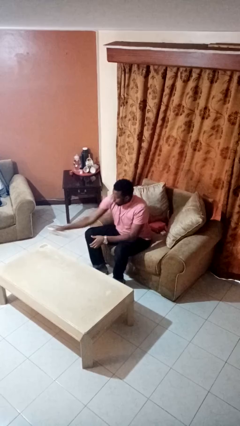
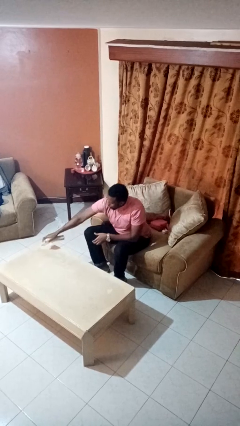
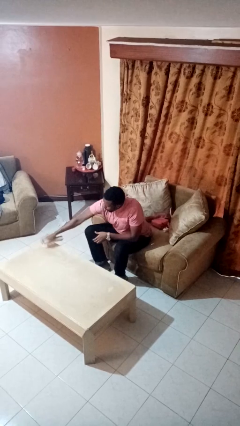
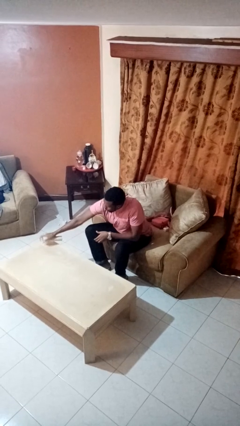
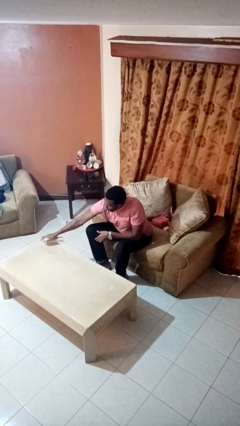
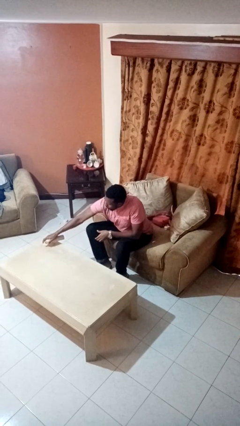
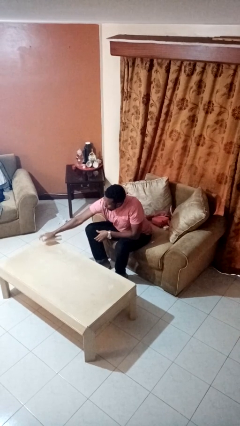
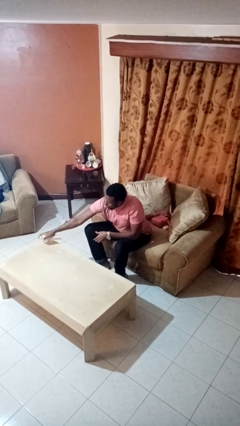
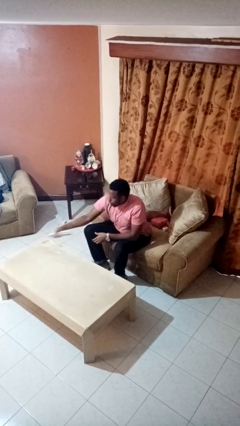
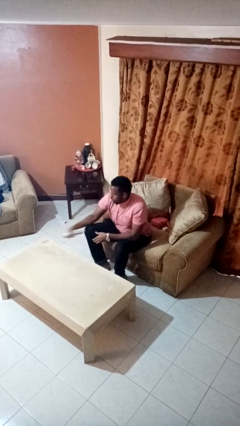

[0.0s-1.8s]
person sprays from bottle

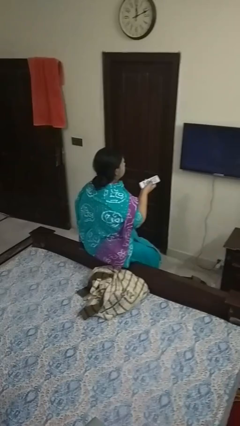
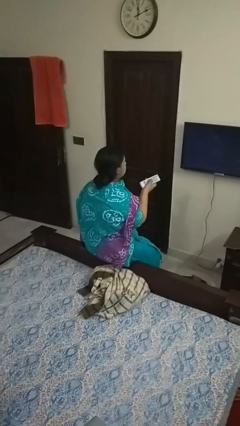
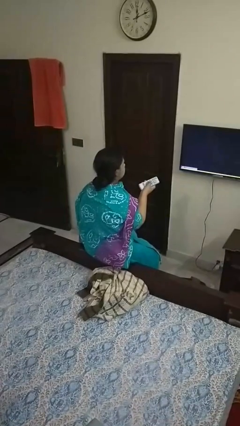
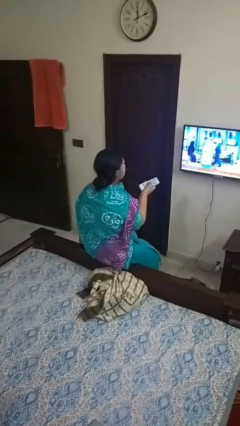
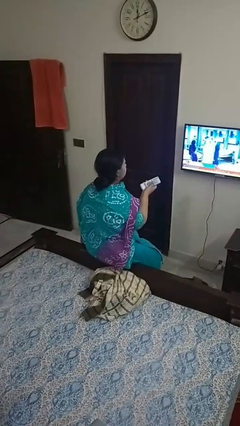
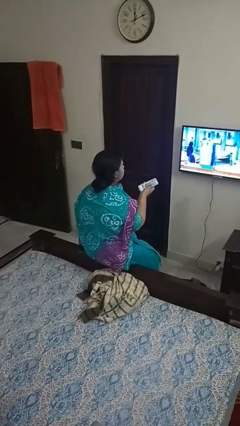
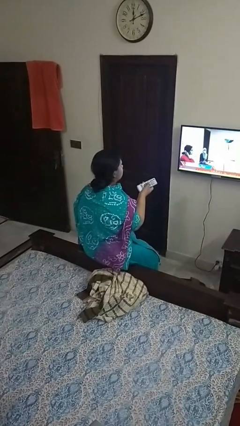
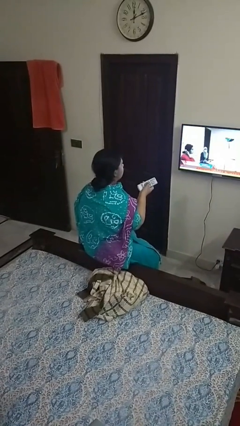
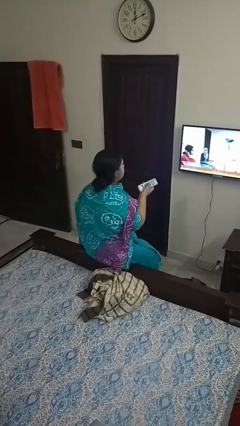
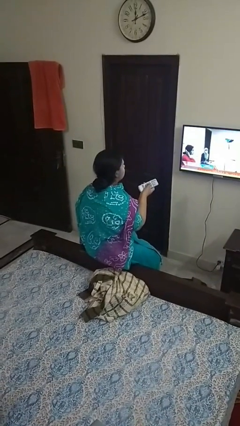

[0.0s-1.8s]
person uses television remote

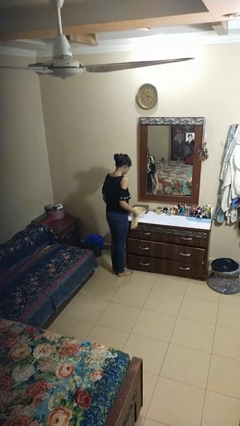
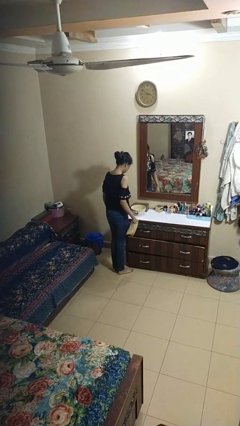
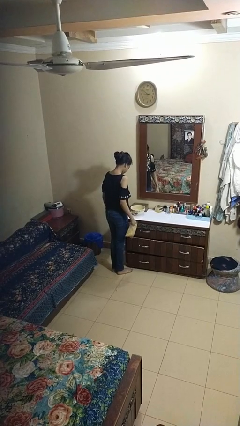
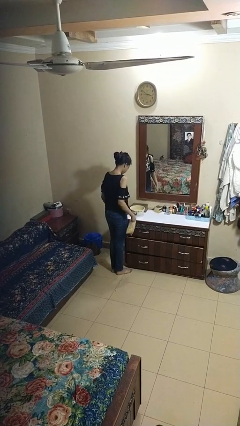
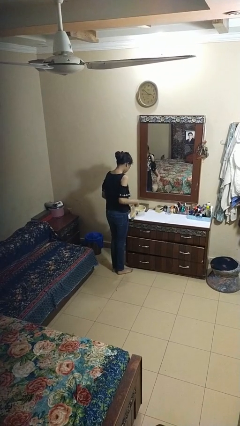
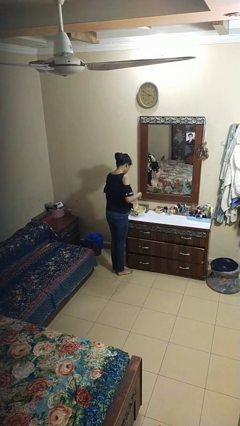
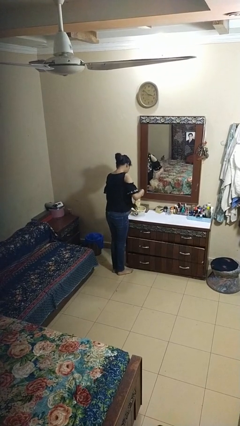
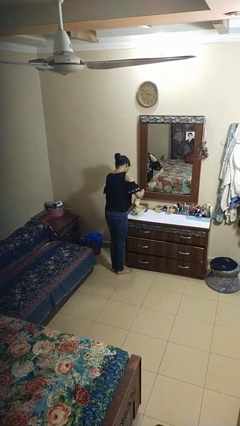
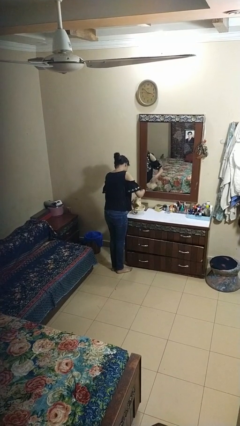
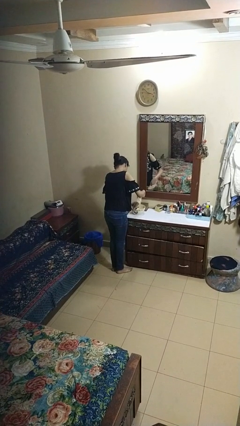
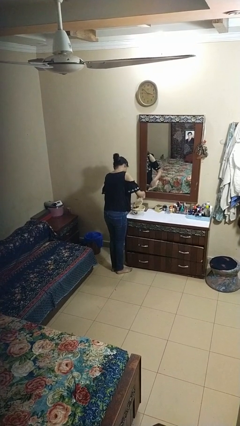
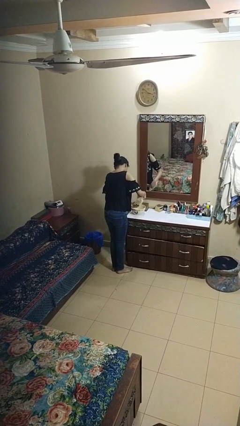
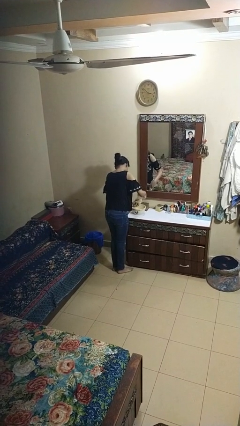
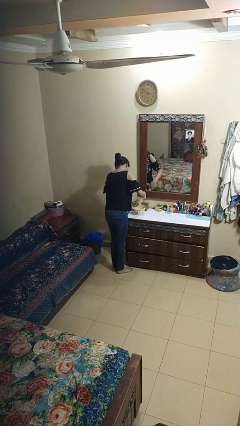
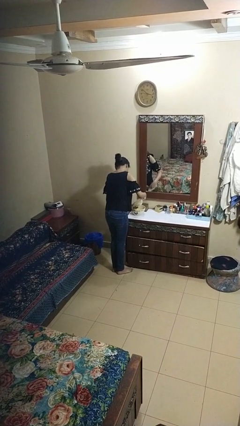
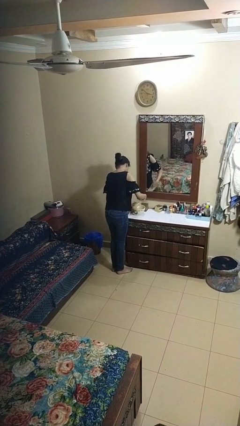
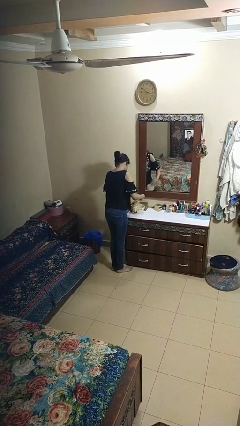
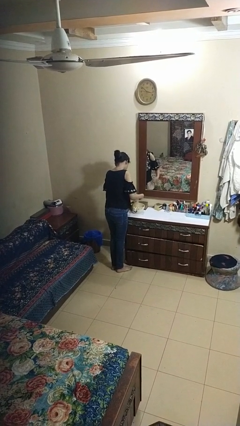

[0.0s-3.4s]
person pours into bowl

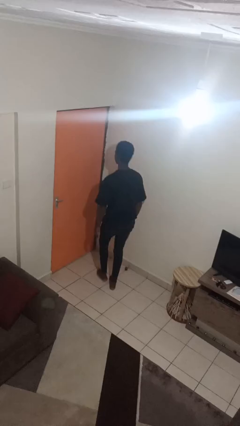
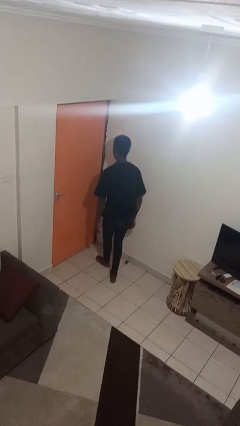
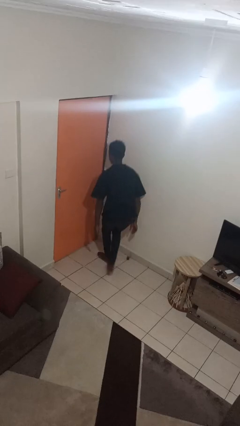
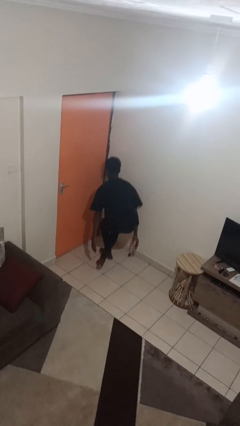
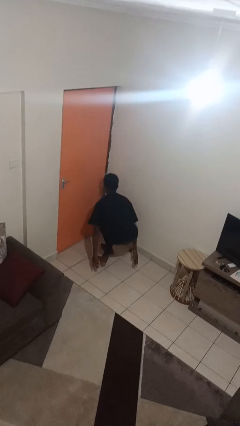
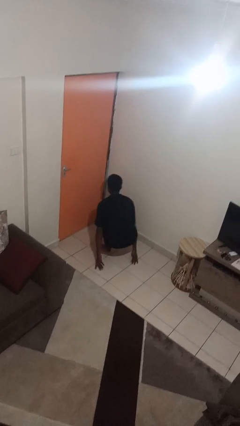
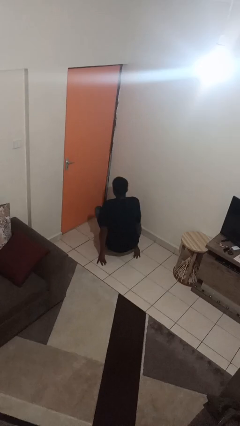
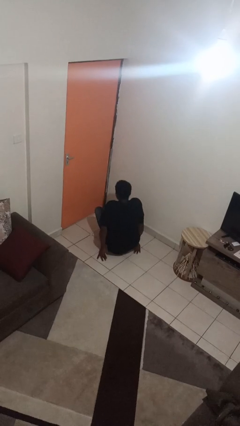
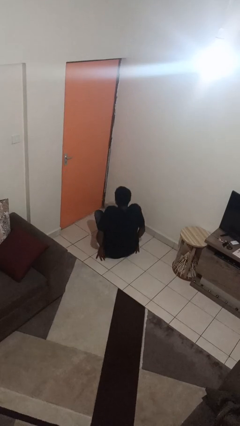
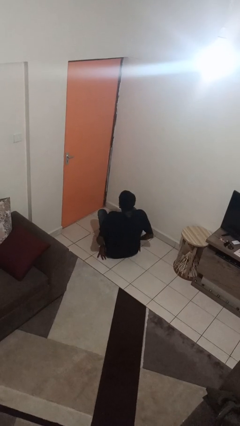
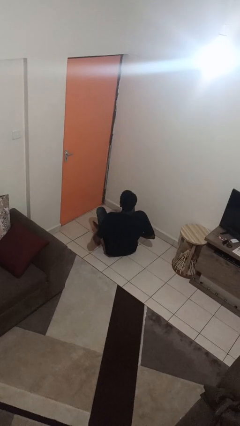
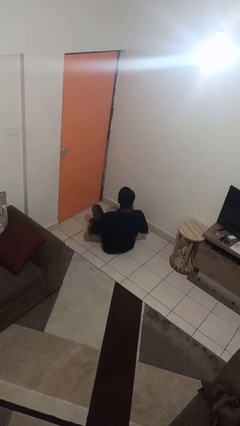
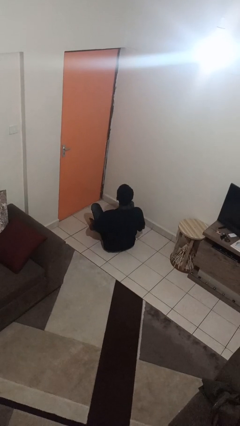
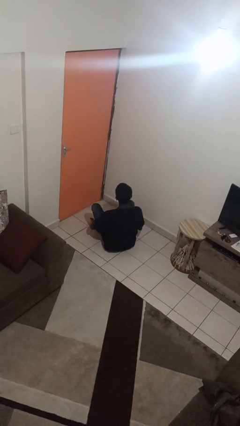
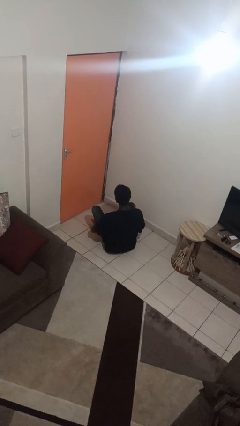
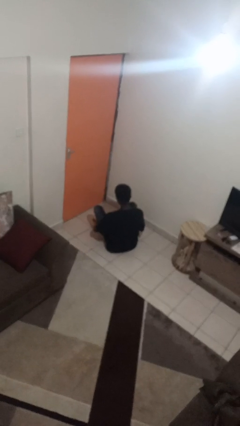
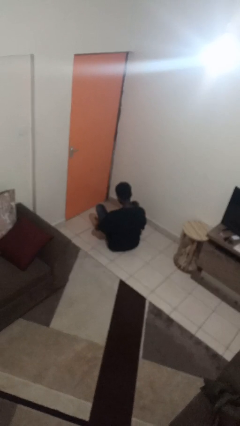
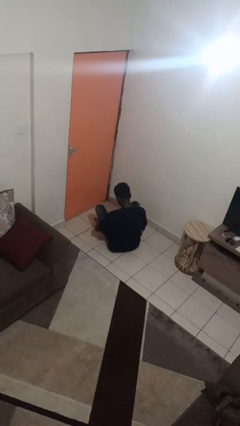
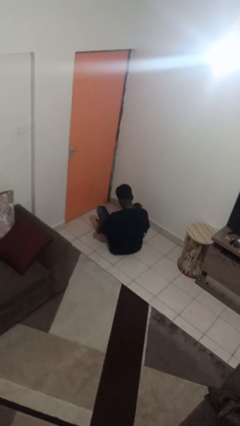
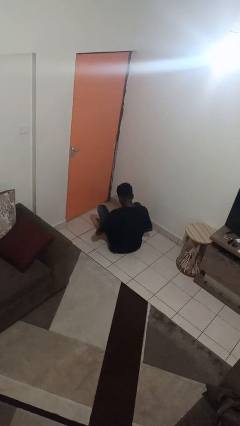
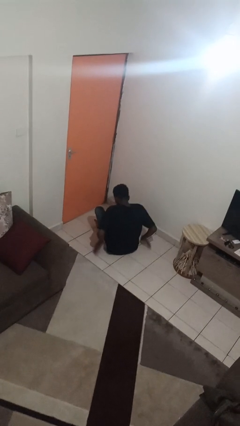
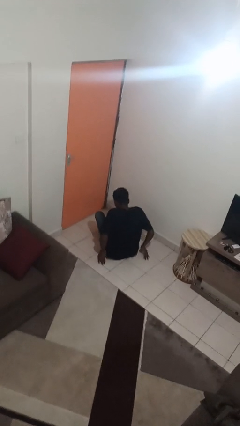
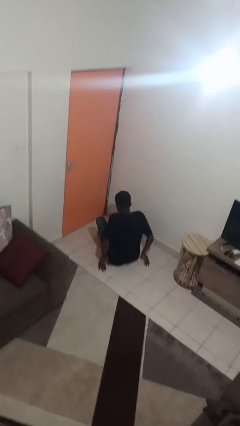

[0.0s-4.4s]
person sits crisscross

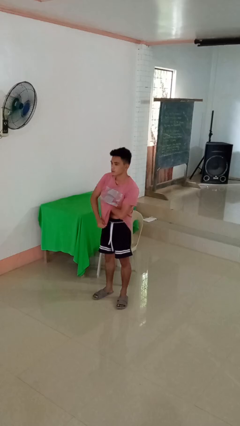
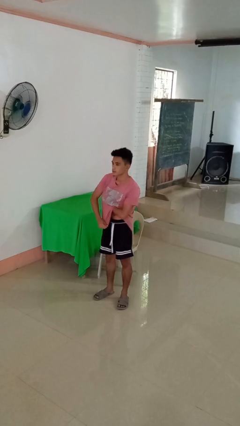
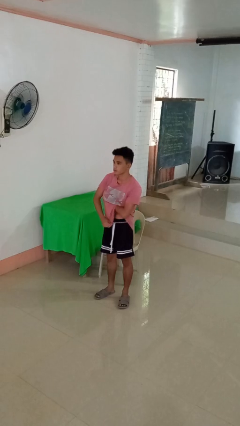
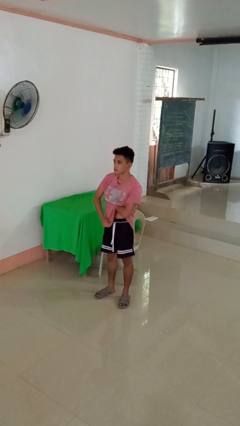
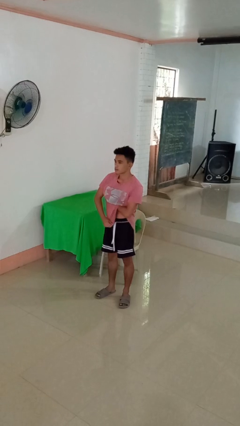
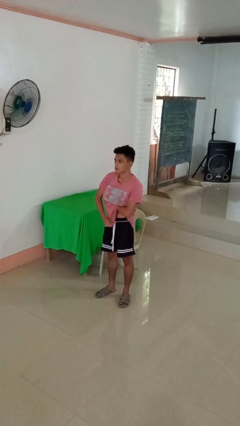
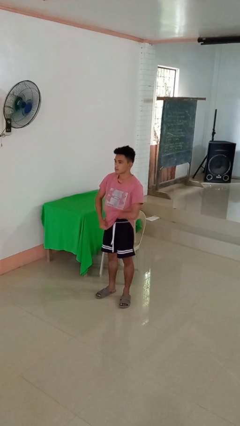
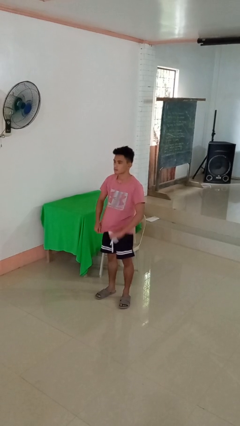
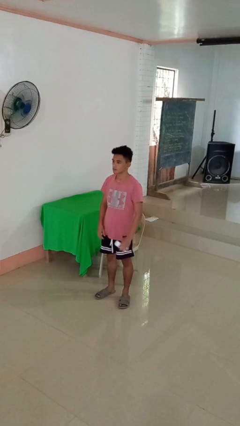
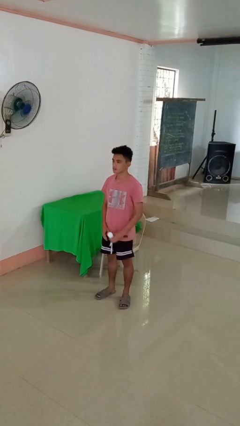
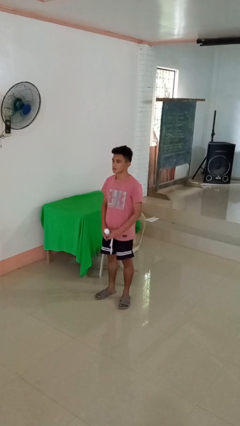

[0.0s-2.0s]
person applies deodorant

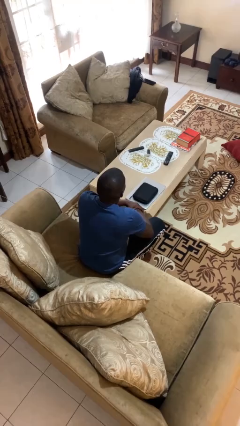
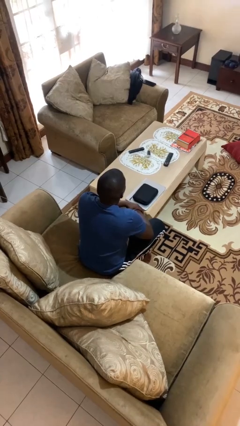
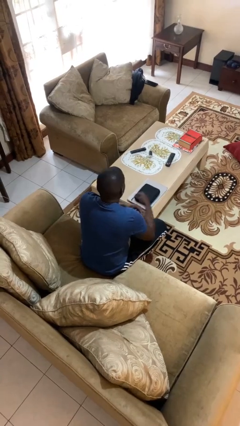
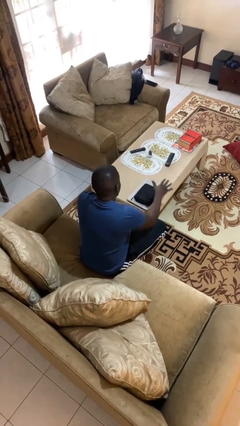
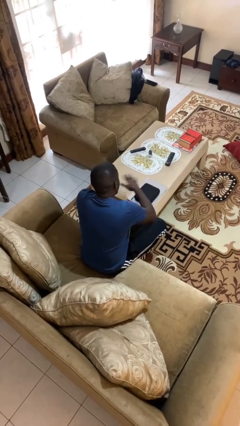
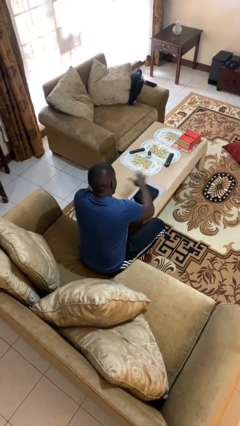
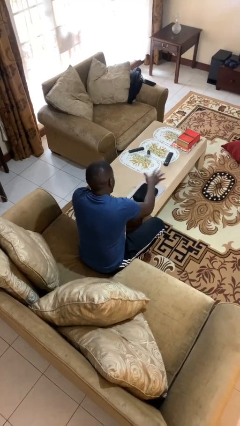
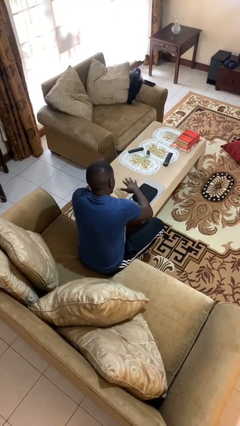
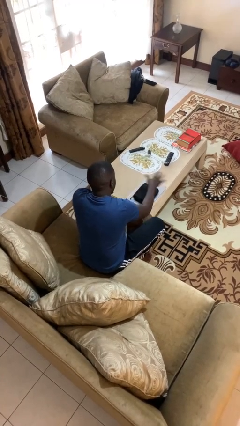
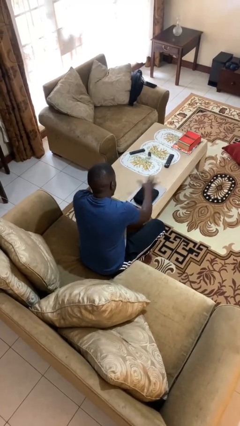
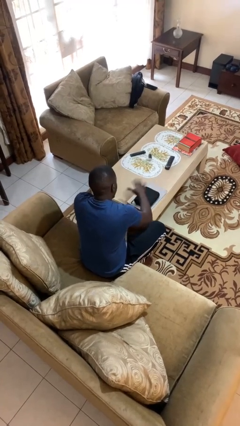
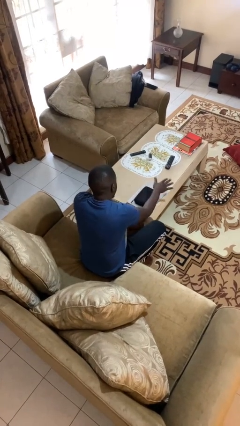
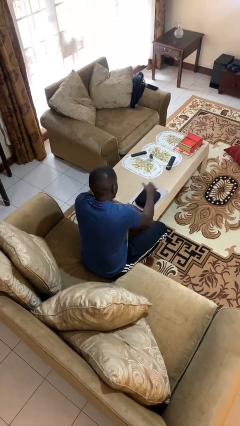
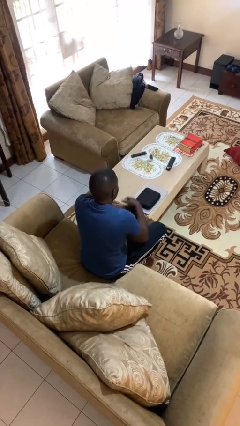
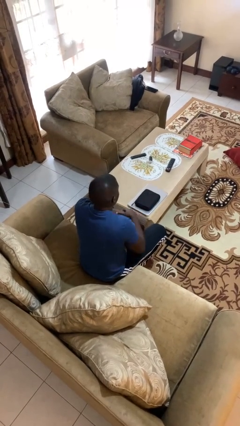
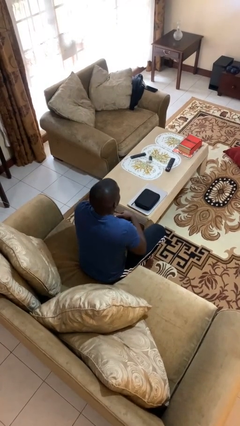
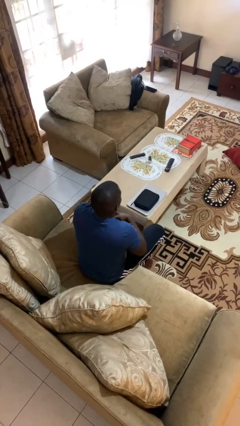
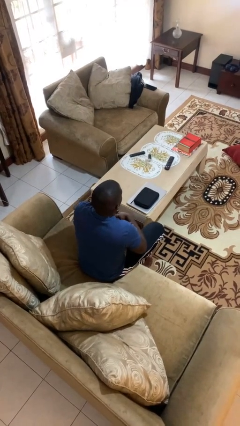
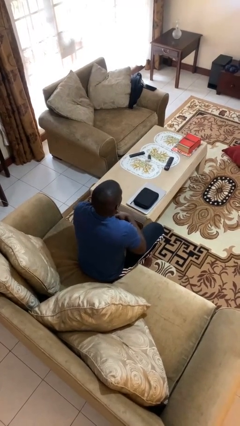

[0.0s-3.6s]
person waves hand over object
